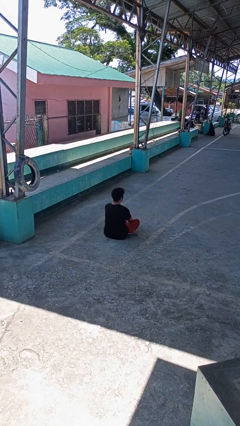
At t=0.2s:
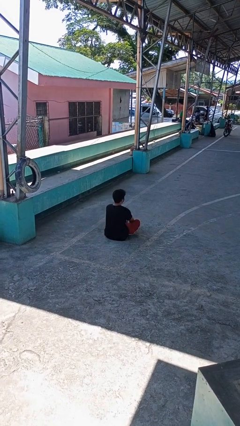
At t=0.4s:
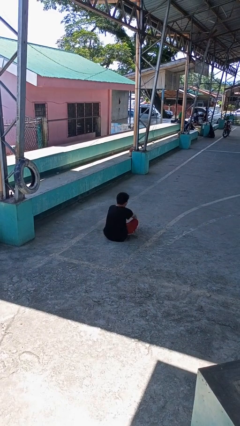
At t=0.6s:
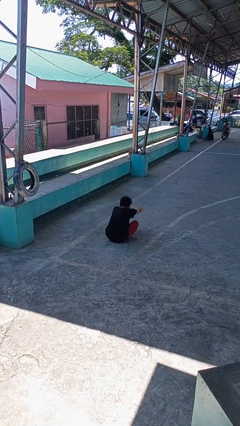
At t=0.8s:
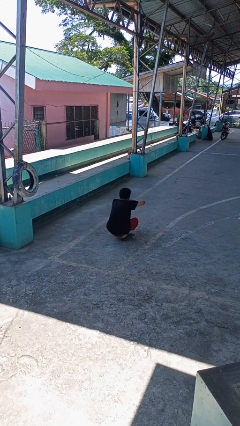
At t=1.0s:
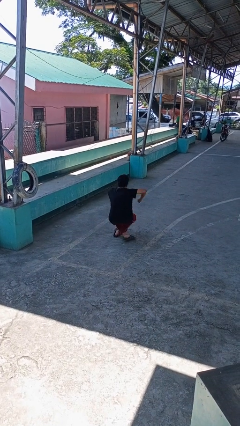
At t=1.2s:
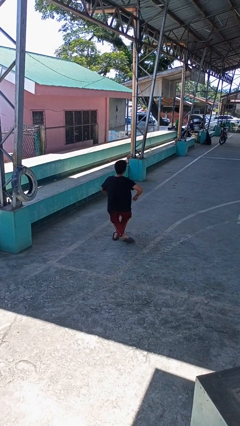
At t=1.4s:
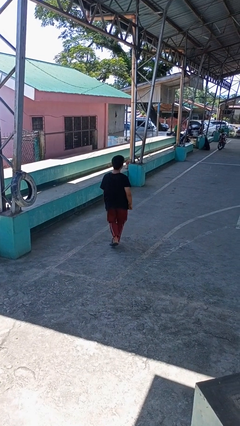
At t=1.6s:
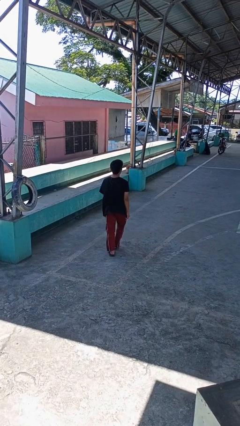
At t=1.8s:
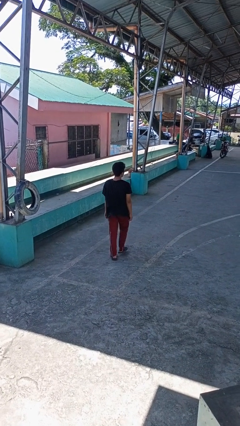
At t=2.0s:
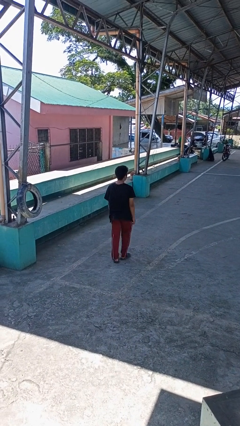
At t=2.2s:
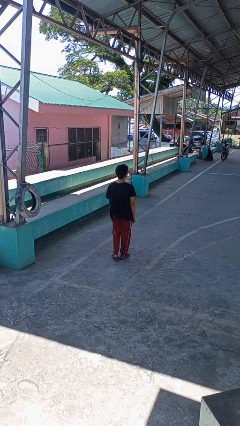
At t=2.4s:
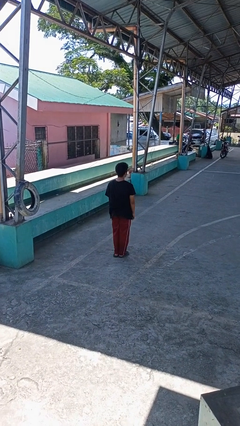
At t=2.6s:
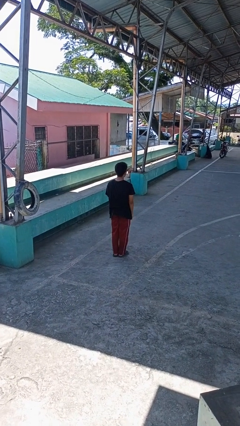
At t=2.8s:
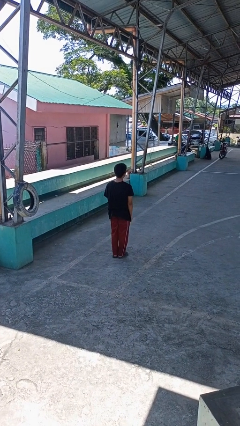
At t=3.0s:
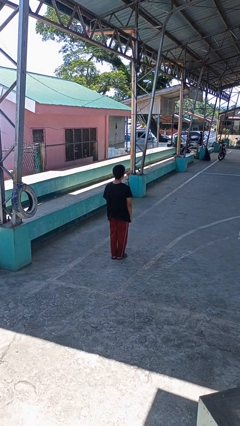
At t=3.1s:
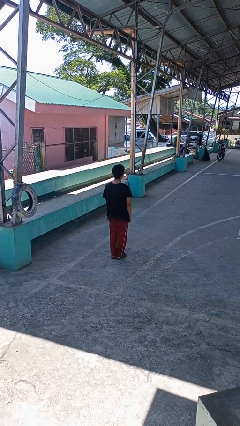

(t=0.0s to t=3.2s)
person stands up from floor

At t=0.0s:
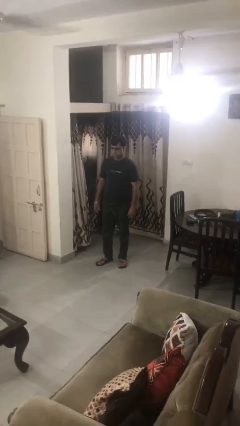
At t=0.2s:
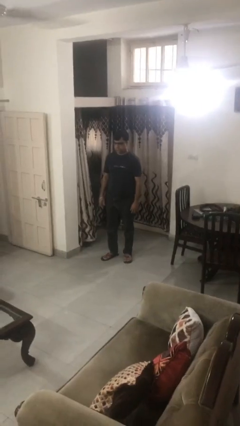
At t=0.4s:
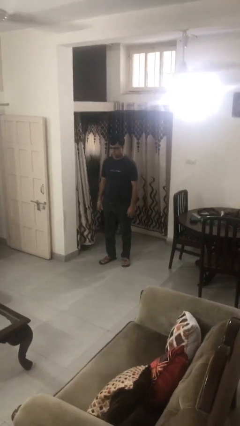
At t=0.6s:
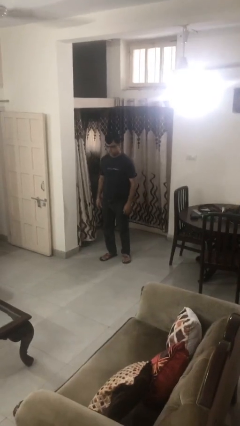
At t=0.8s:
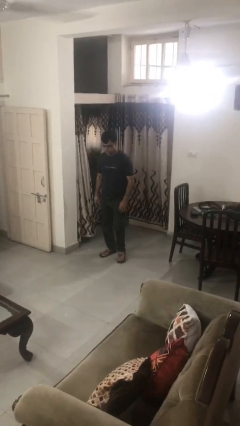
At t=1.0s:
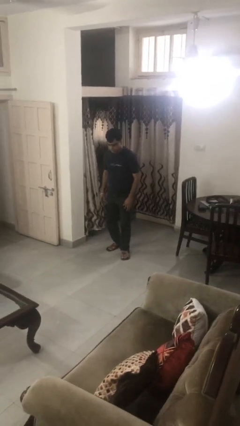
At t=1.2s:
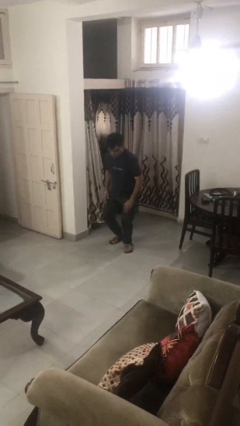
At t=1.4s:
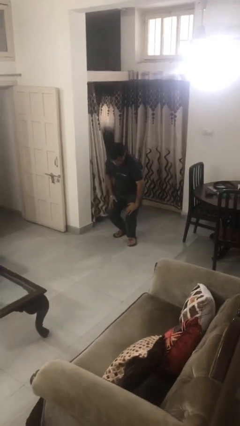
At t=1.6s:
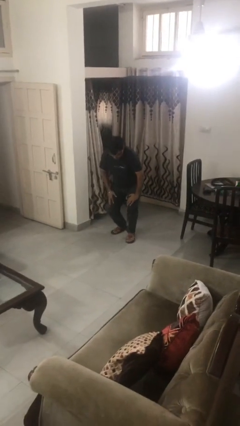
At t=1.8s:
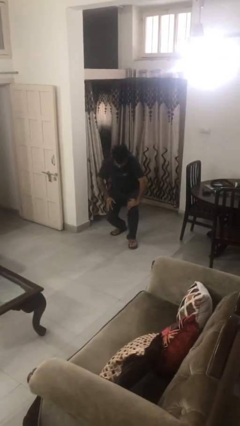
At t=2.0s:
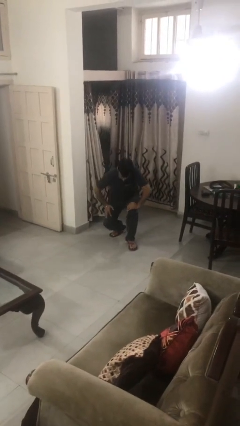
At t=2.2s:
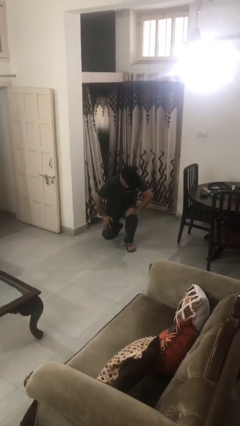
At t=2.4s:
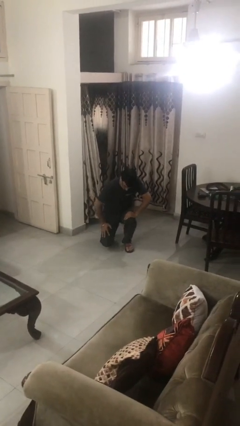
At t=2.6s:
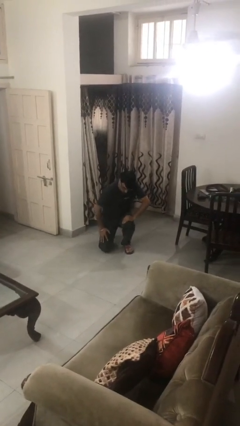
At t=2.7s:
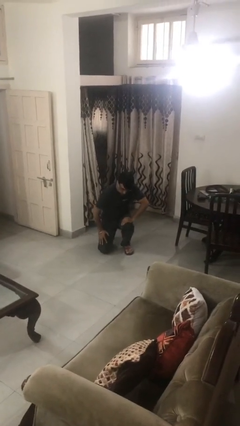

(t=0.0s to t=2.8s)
person kneels

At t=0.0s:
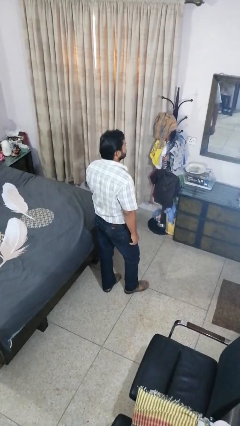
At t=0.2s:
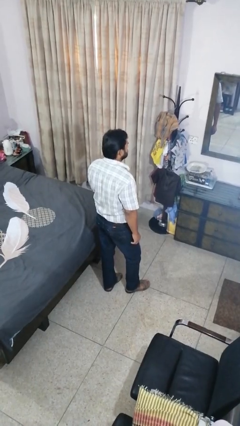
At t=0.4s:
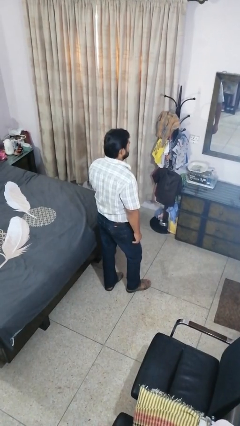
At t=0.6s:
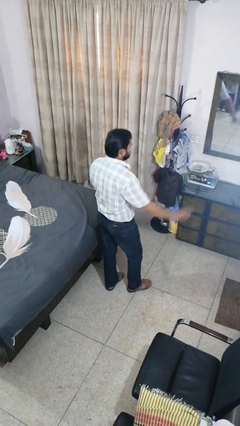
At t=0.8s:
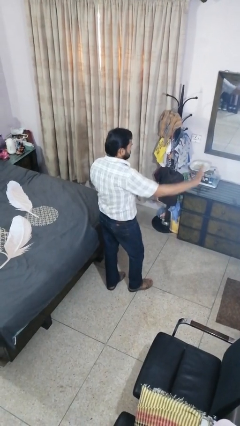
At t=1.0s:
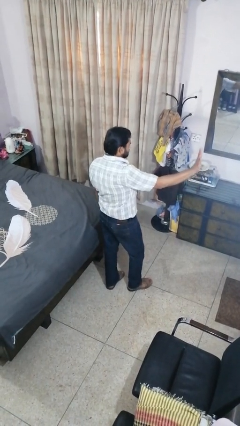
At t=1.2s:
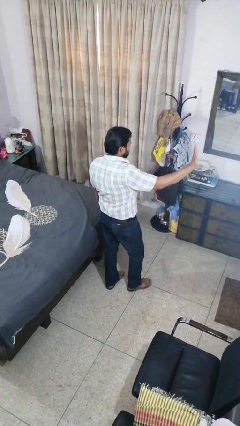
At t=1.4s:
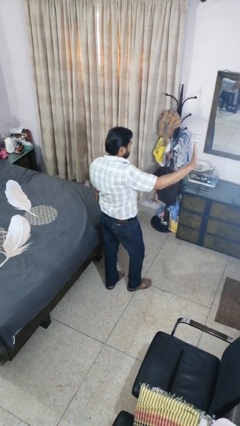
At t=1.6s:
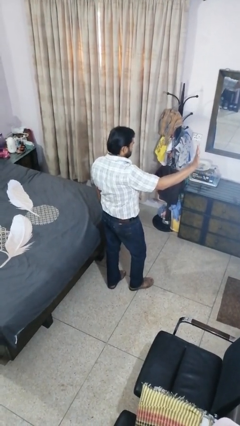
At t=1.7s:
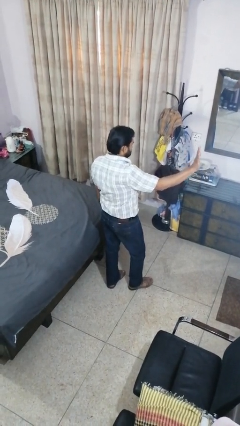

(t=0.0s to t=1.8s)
person gestures stop

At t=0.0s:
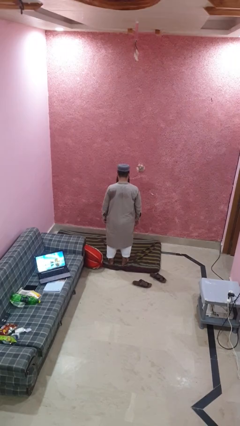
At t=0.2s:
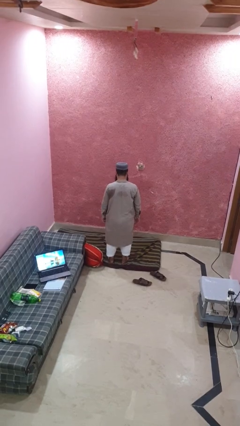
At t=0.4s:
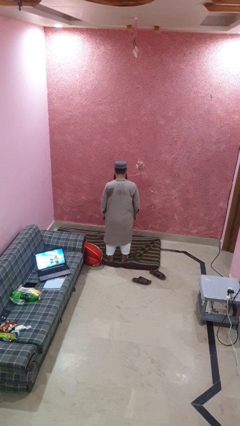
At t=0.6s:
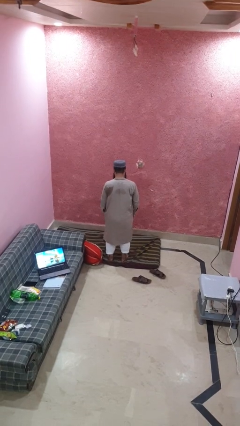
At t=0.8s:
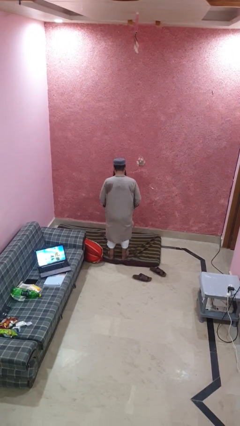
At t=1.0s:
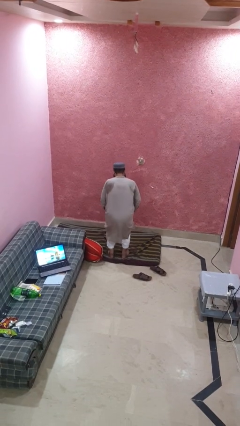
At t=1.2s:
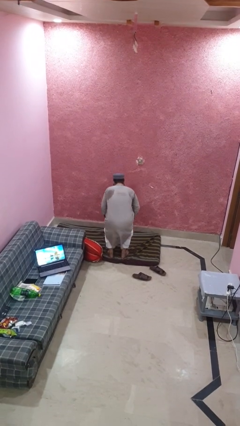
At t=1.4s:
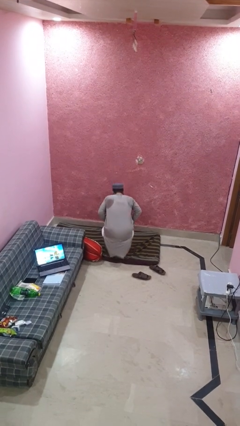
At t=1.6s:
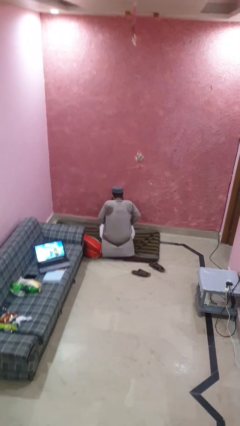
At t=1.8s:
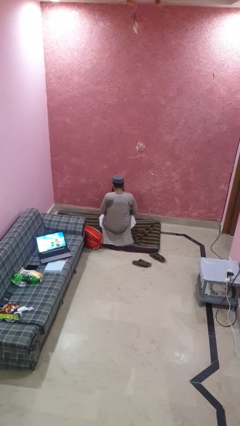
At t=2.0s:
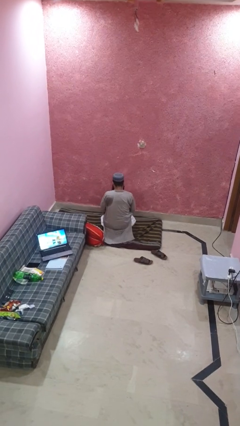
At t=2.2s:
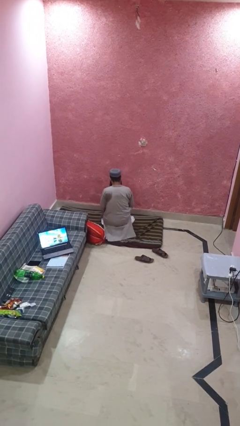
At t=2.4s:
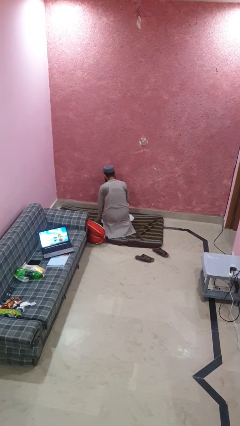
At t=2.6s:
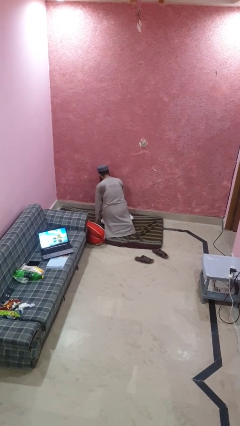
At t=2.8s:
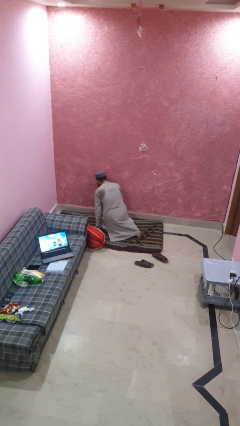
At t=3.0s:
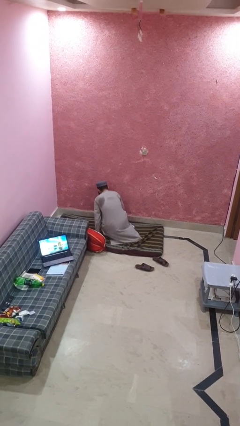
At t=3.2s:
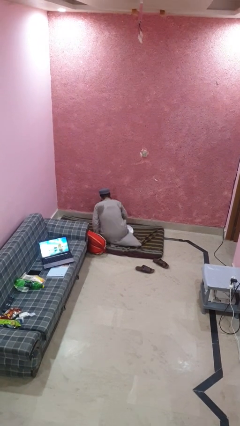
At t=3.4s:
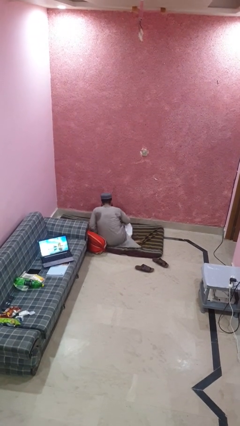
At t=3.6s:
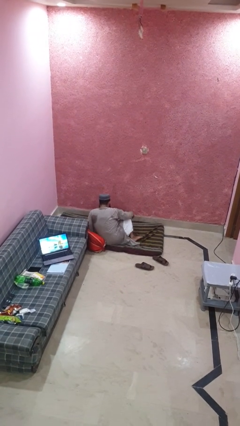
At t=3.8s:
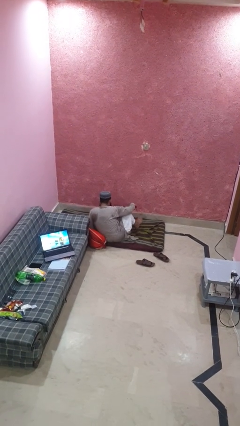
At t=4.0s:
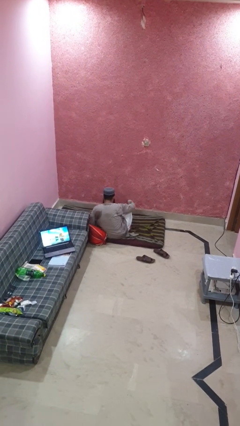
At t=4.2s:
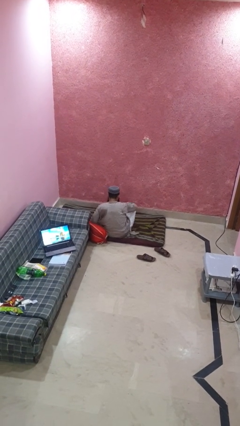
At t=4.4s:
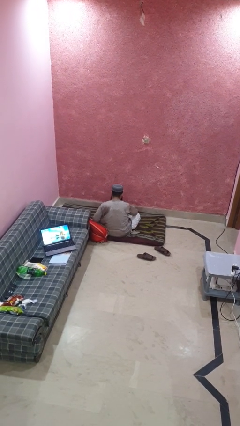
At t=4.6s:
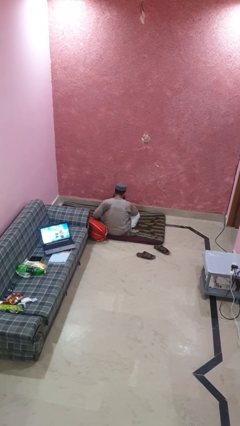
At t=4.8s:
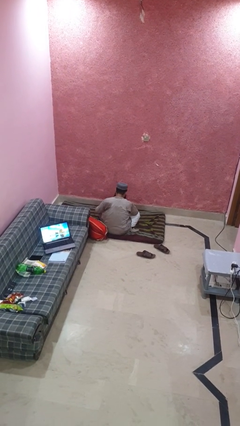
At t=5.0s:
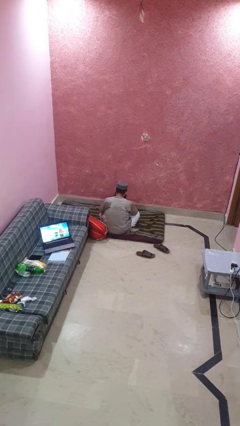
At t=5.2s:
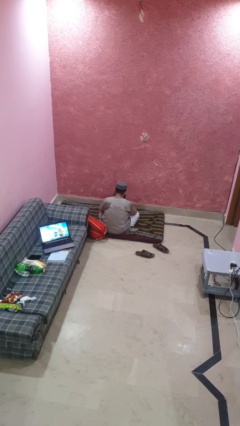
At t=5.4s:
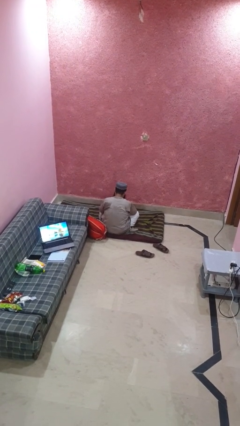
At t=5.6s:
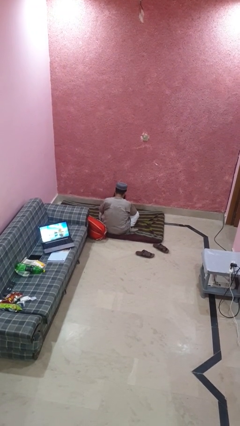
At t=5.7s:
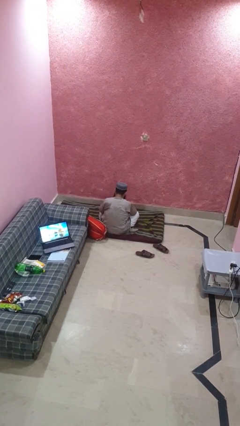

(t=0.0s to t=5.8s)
person sits crisscross

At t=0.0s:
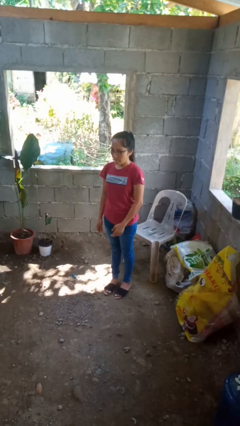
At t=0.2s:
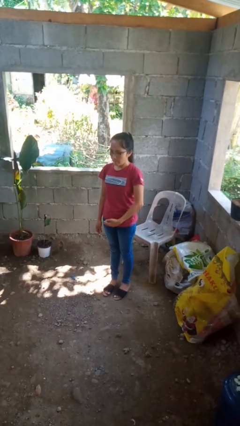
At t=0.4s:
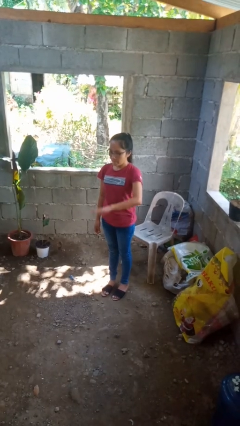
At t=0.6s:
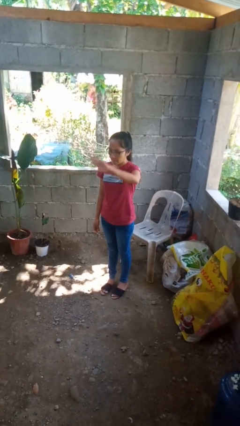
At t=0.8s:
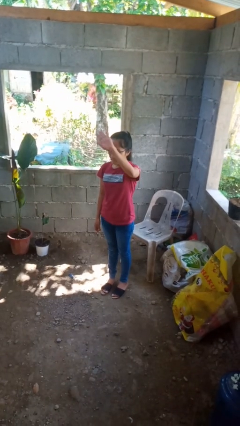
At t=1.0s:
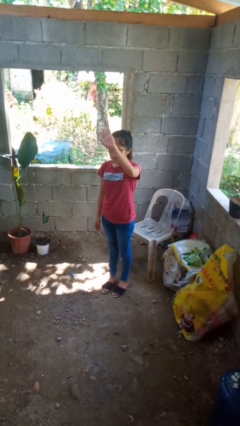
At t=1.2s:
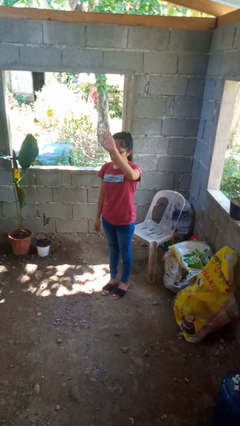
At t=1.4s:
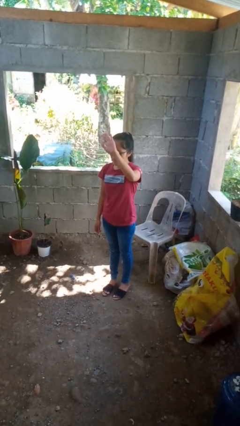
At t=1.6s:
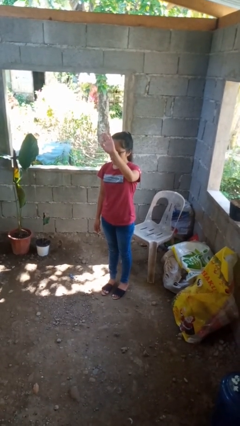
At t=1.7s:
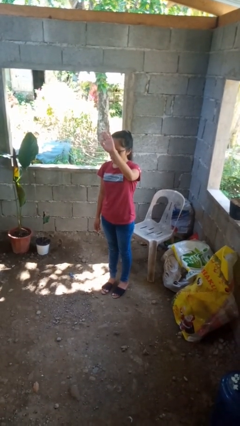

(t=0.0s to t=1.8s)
person gestures swipe up

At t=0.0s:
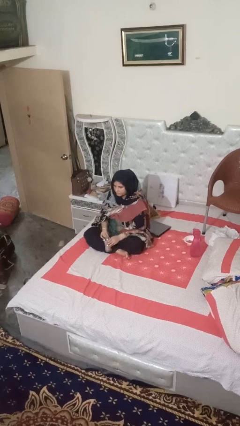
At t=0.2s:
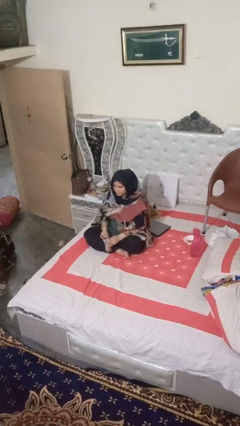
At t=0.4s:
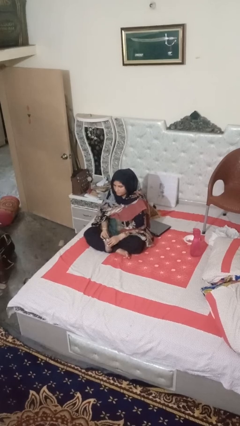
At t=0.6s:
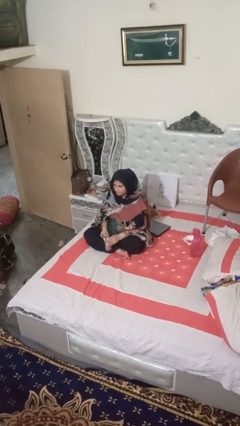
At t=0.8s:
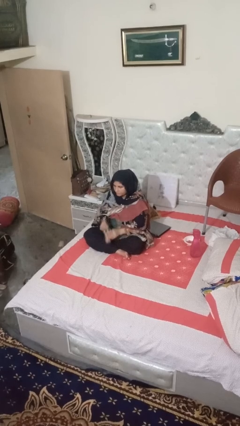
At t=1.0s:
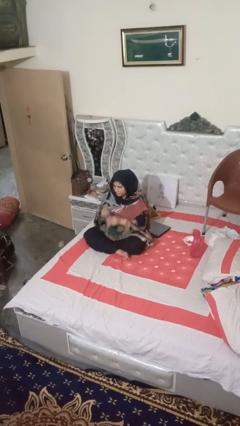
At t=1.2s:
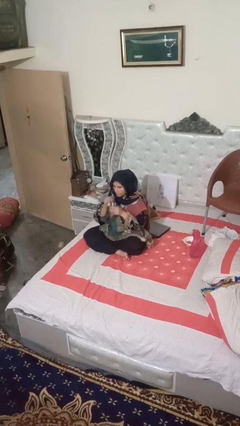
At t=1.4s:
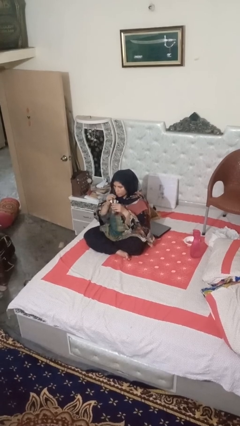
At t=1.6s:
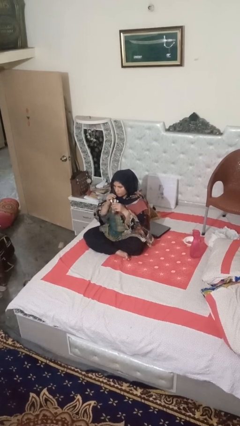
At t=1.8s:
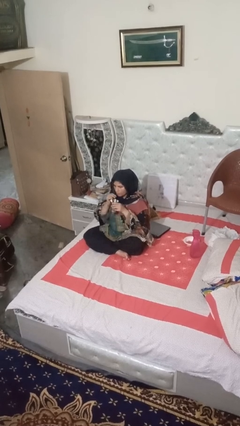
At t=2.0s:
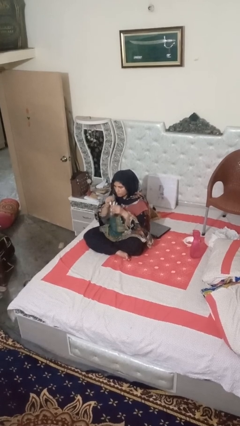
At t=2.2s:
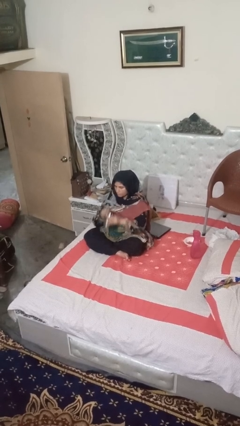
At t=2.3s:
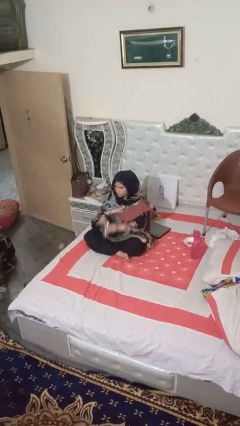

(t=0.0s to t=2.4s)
person drinks from straw
